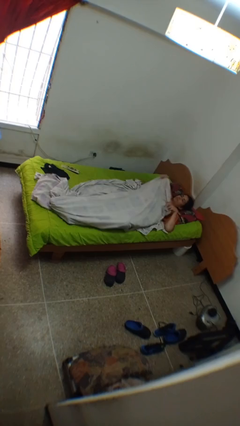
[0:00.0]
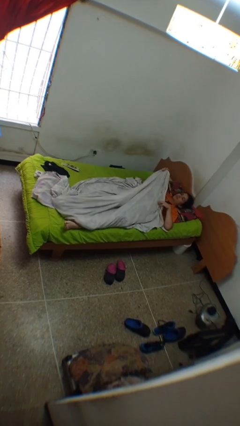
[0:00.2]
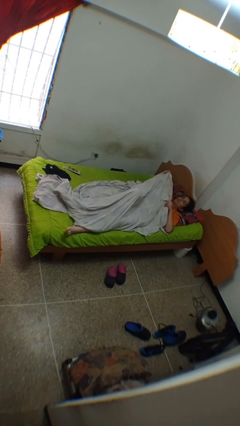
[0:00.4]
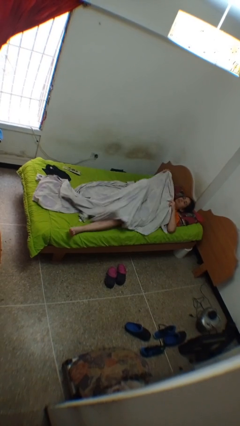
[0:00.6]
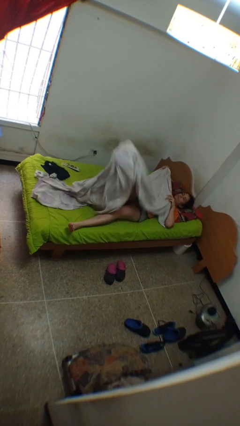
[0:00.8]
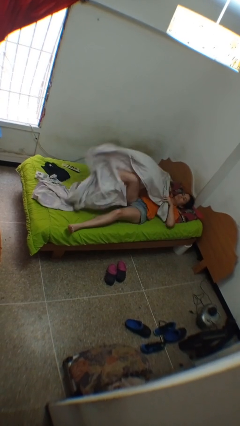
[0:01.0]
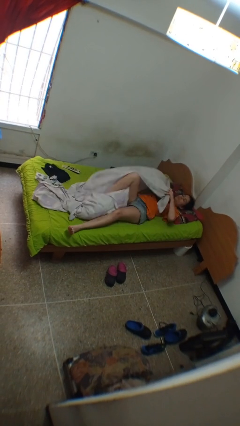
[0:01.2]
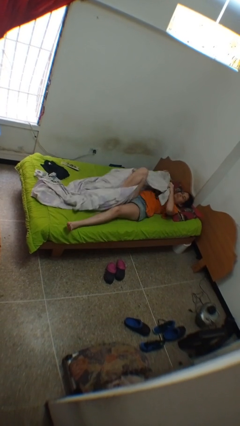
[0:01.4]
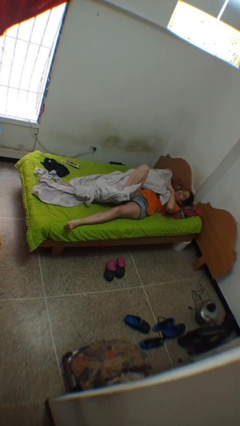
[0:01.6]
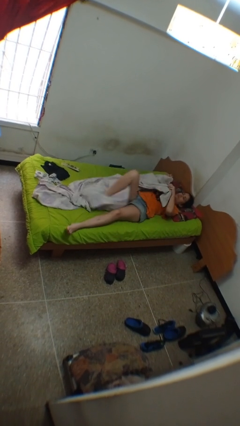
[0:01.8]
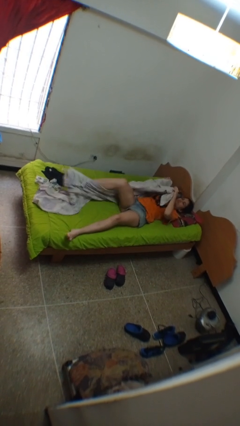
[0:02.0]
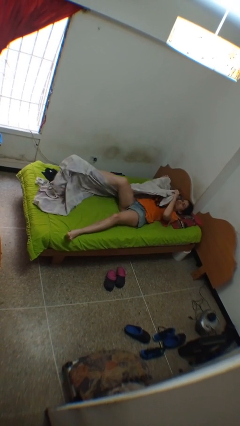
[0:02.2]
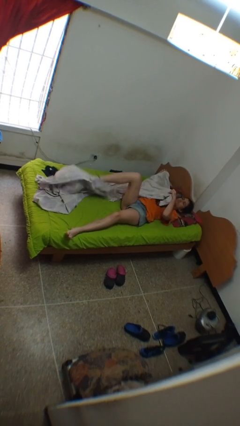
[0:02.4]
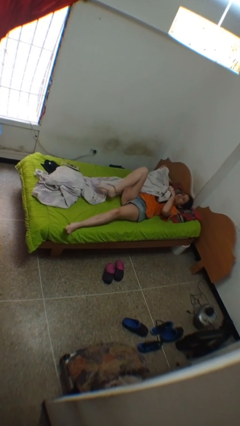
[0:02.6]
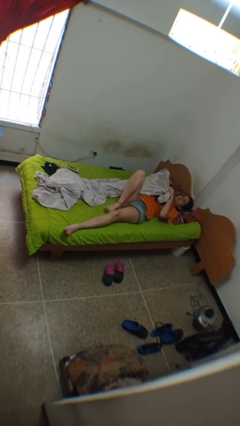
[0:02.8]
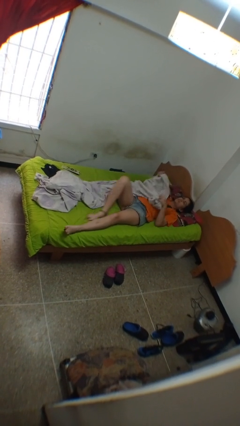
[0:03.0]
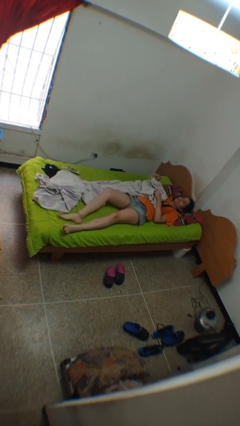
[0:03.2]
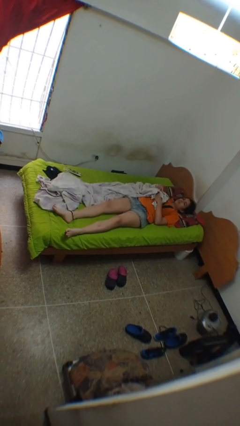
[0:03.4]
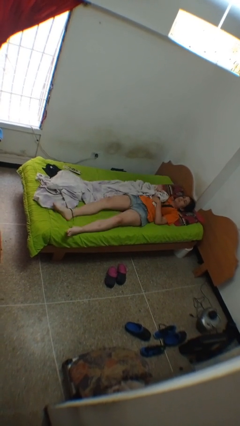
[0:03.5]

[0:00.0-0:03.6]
person uncovers with bedsheets

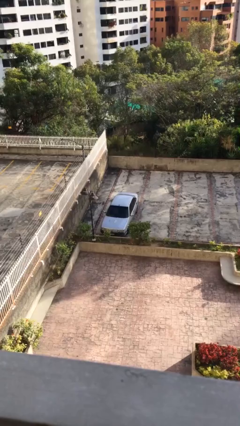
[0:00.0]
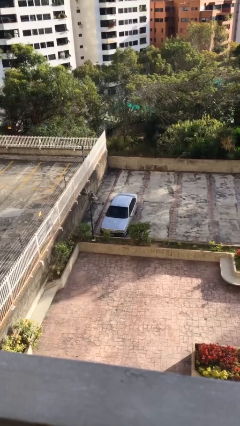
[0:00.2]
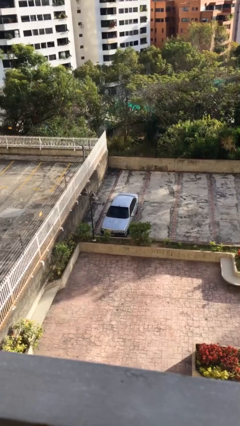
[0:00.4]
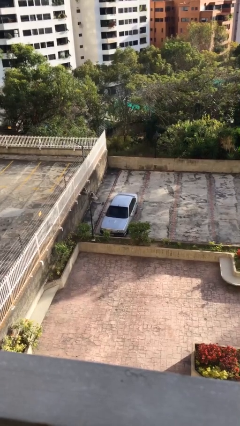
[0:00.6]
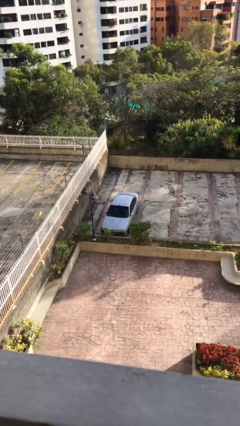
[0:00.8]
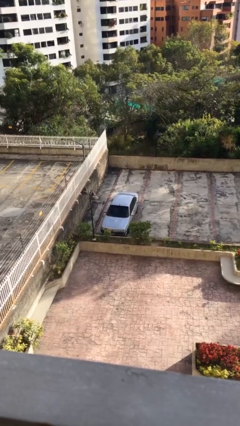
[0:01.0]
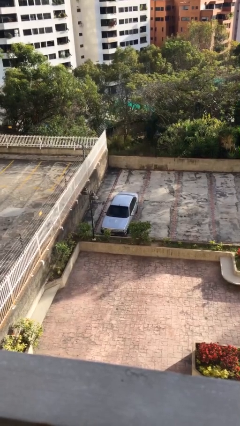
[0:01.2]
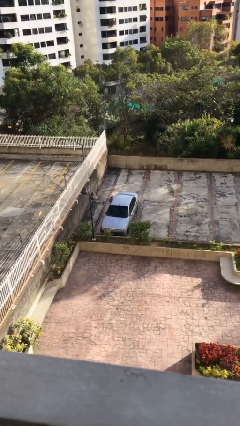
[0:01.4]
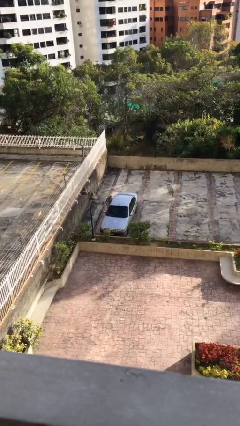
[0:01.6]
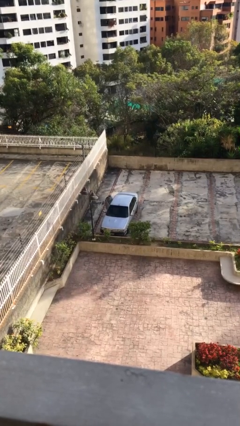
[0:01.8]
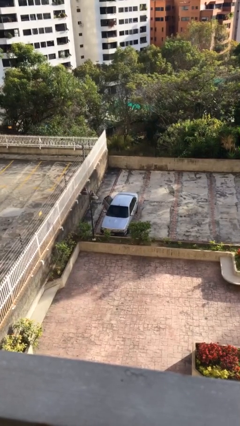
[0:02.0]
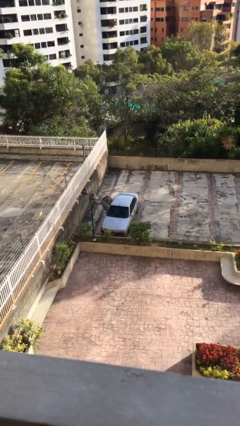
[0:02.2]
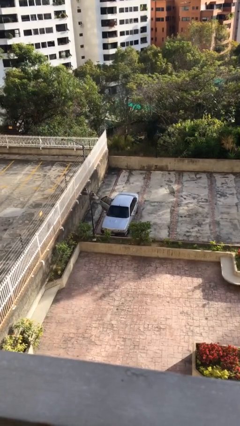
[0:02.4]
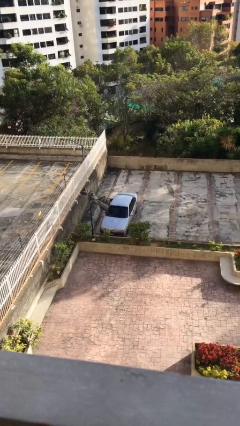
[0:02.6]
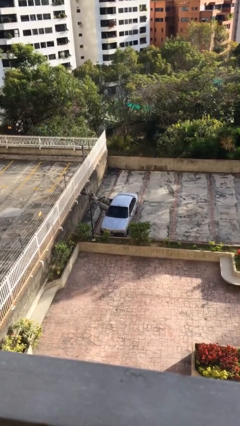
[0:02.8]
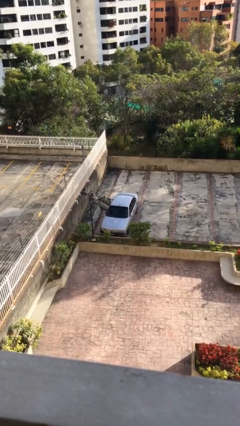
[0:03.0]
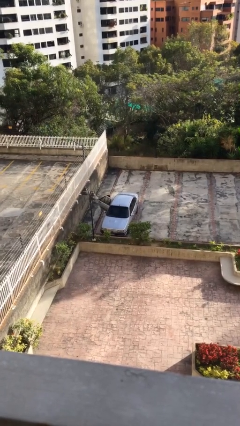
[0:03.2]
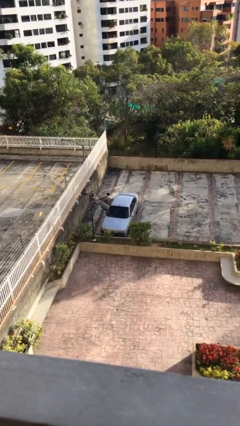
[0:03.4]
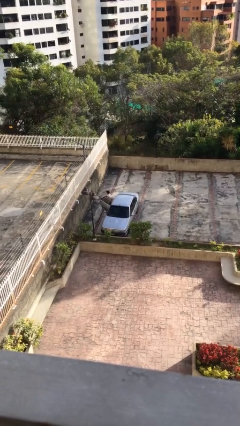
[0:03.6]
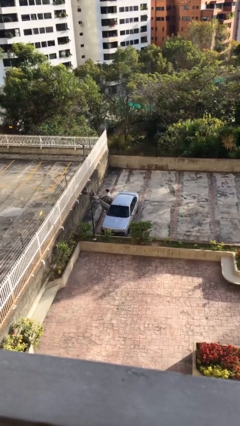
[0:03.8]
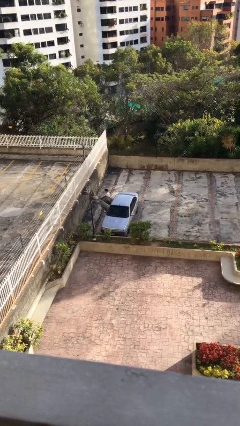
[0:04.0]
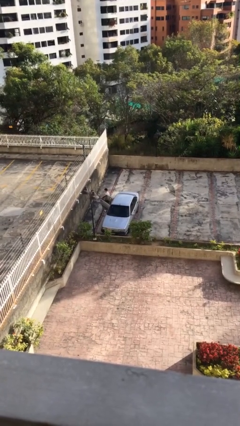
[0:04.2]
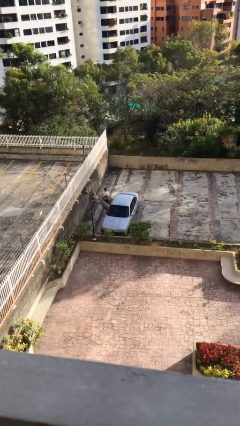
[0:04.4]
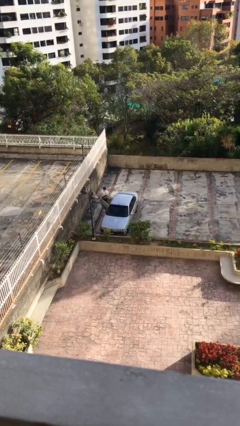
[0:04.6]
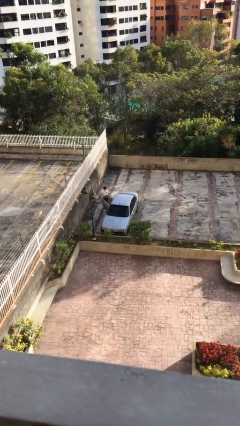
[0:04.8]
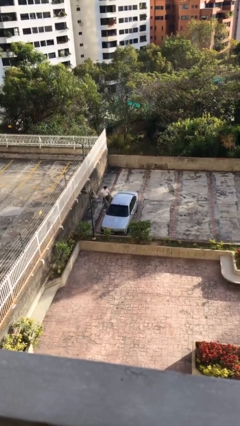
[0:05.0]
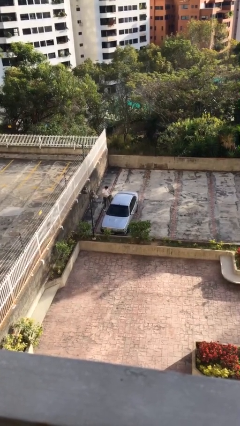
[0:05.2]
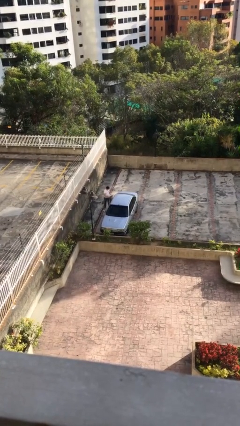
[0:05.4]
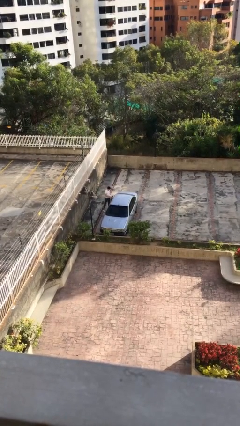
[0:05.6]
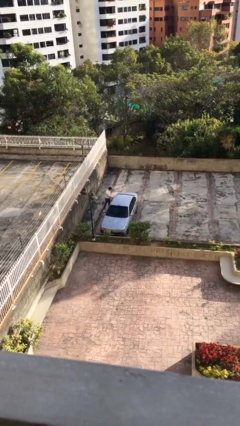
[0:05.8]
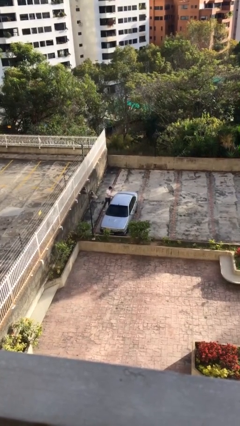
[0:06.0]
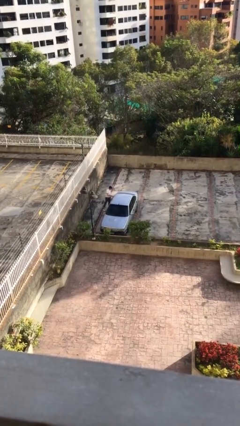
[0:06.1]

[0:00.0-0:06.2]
car drops off person

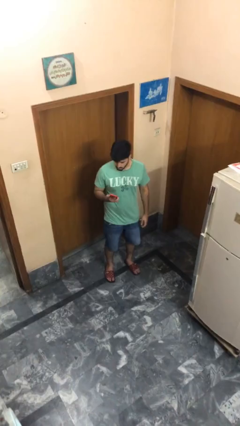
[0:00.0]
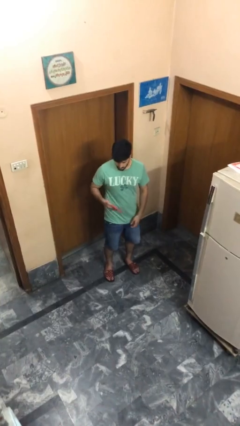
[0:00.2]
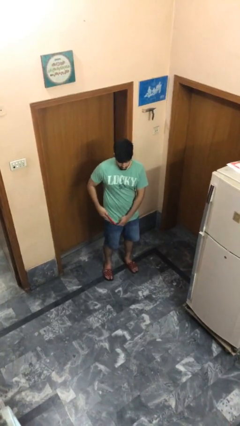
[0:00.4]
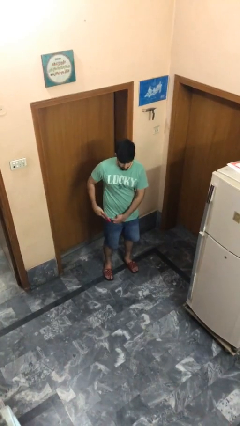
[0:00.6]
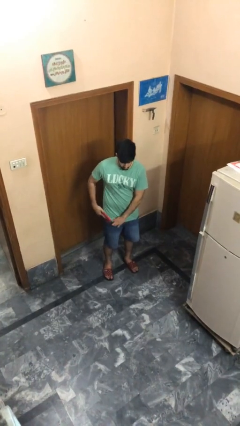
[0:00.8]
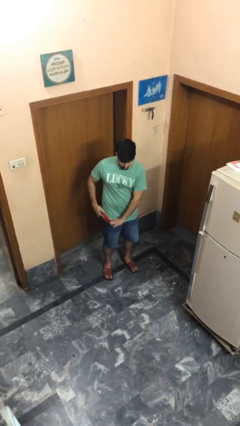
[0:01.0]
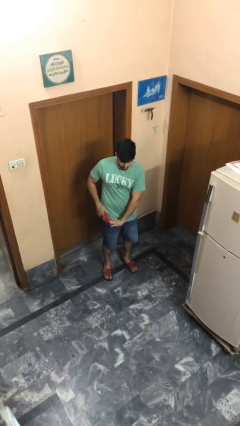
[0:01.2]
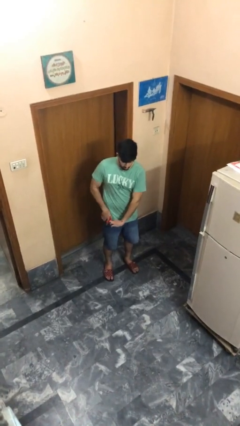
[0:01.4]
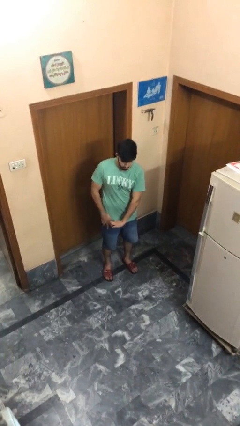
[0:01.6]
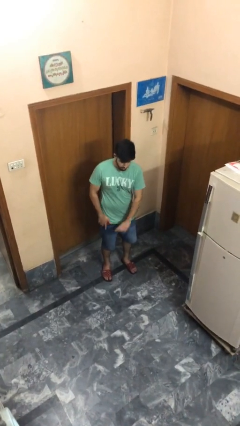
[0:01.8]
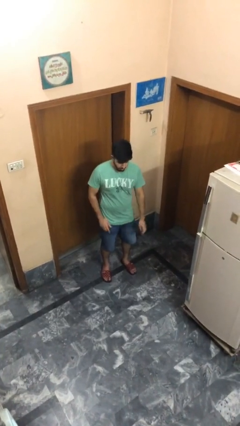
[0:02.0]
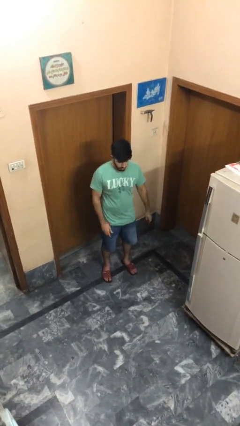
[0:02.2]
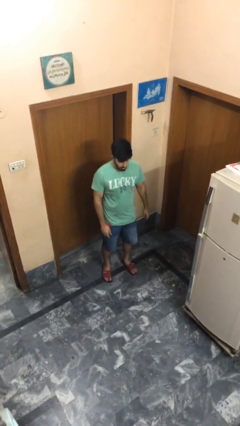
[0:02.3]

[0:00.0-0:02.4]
person puts phone into pocket

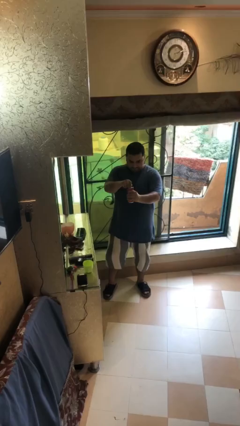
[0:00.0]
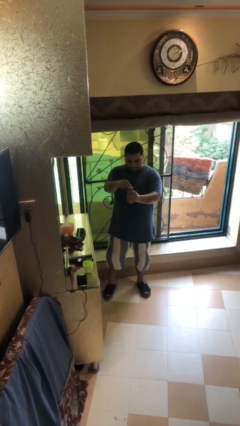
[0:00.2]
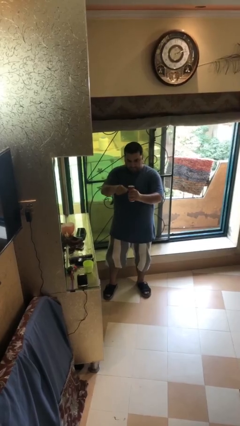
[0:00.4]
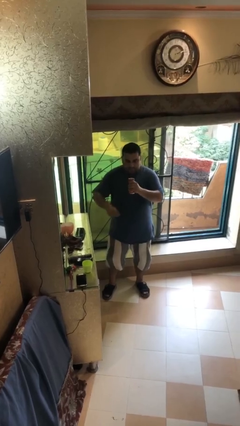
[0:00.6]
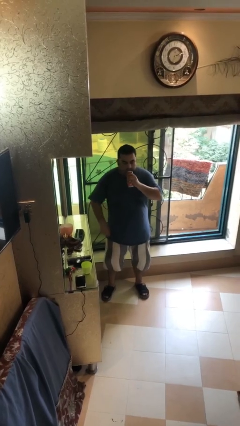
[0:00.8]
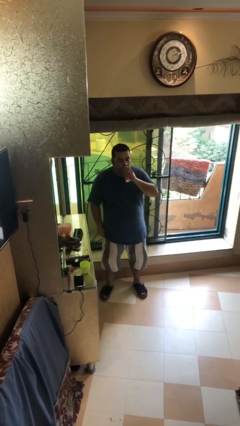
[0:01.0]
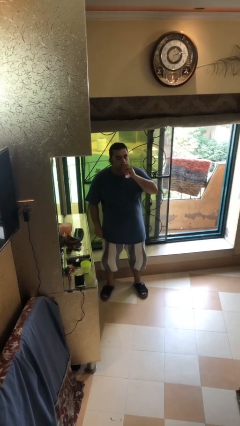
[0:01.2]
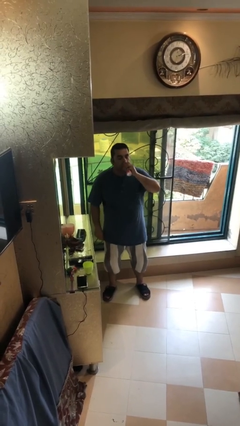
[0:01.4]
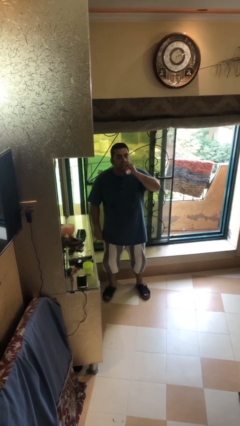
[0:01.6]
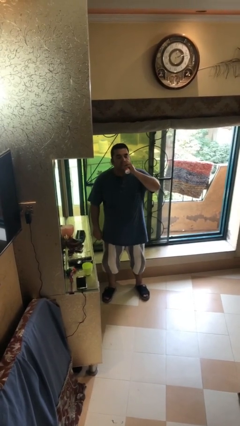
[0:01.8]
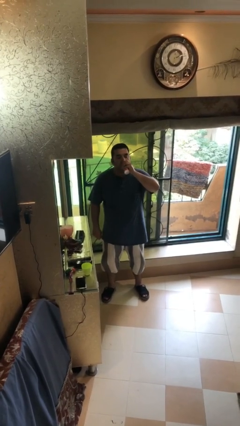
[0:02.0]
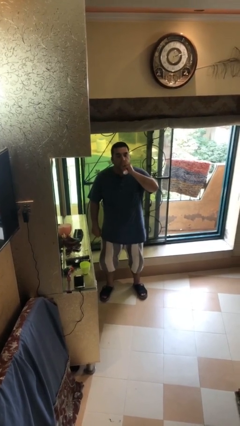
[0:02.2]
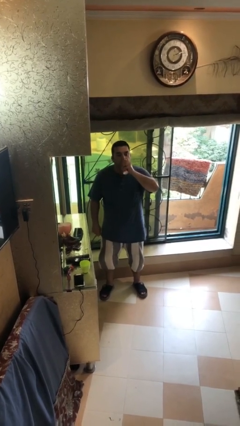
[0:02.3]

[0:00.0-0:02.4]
person drinks from beverage can

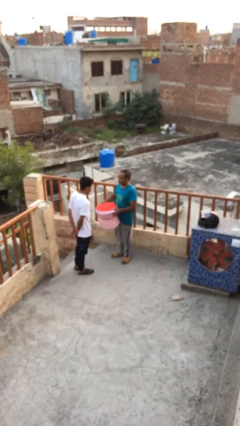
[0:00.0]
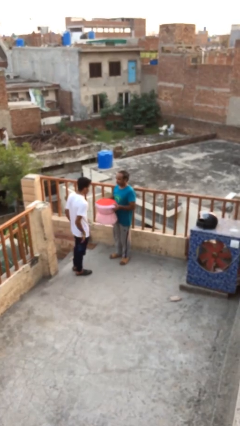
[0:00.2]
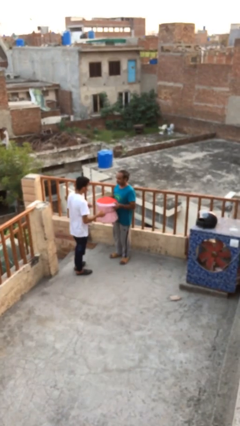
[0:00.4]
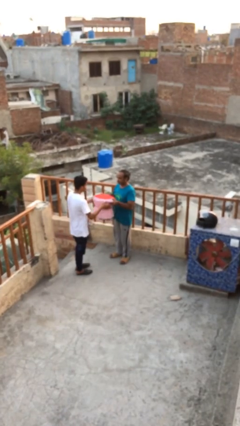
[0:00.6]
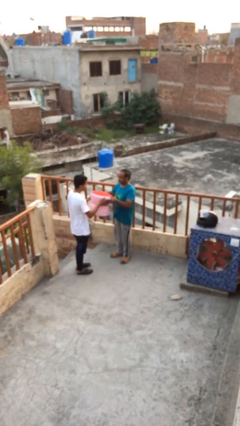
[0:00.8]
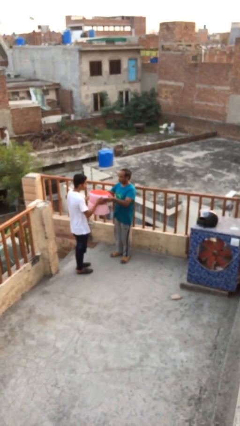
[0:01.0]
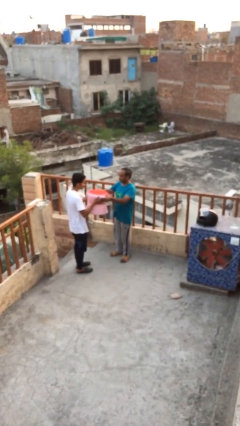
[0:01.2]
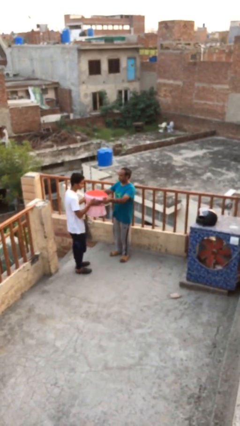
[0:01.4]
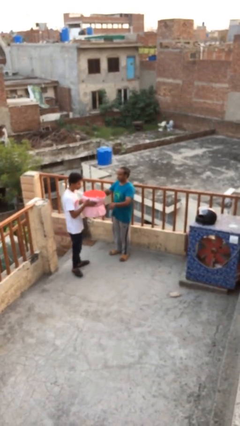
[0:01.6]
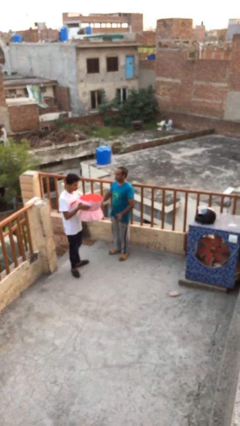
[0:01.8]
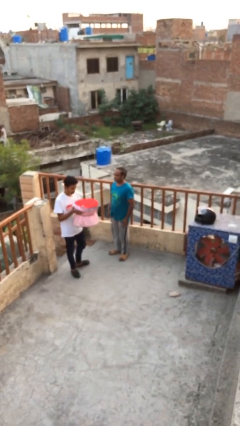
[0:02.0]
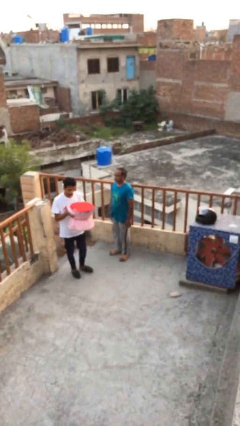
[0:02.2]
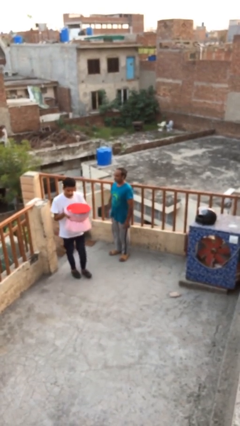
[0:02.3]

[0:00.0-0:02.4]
person transfers object to person

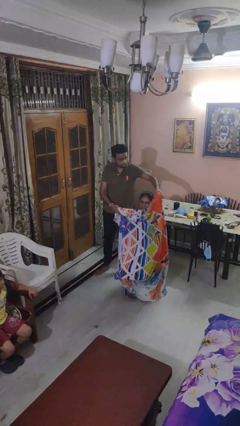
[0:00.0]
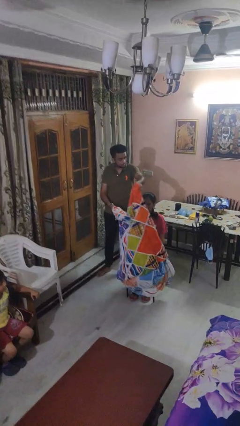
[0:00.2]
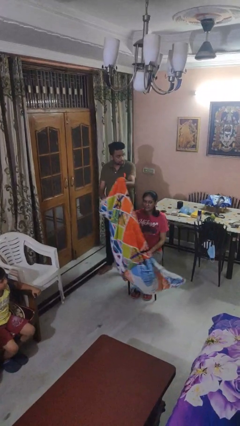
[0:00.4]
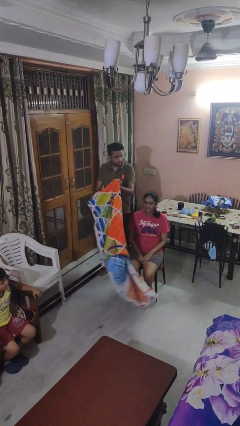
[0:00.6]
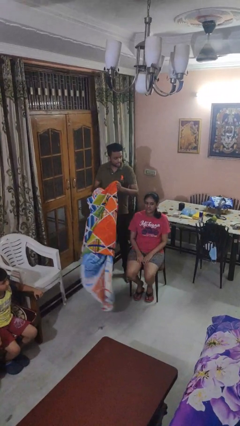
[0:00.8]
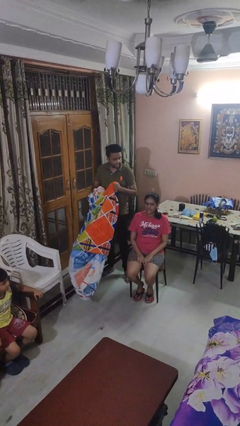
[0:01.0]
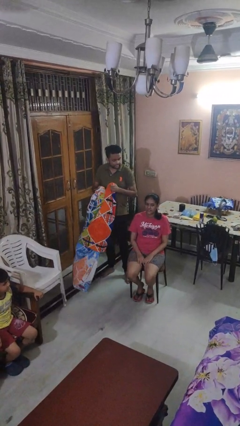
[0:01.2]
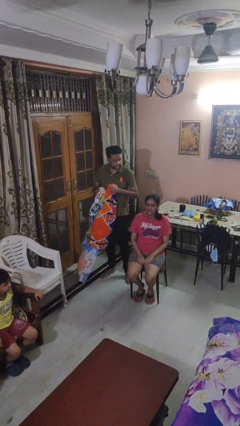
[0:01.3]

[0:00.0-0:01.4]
person uncovers friend with blanket
